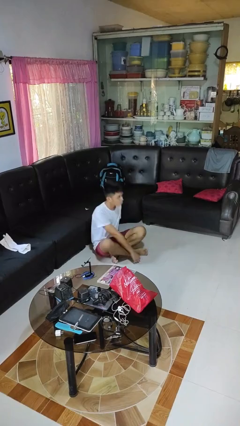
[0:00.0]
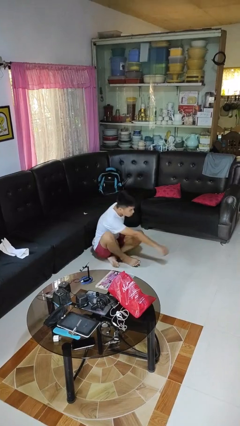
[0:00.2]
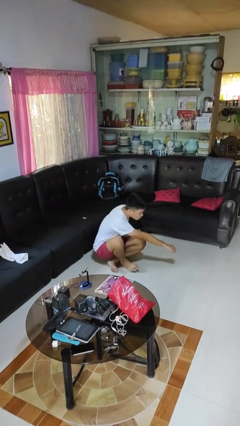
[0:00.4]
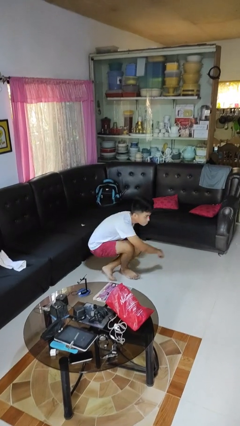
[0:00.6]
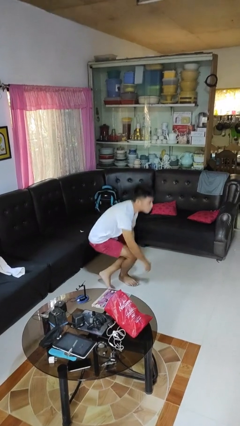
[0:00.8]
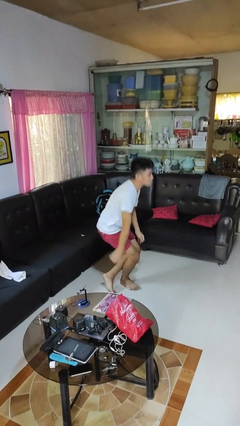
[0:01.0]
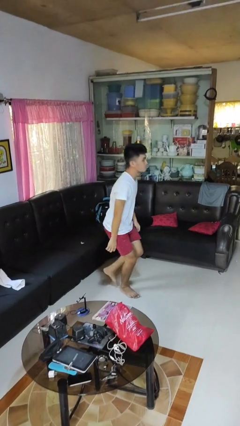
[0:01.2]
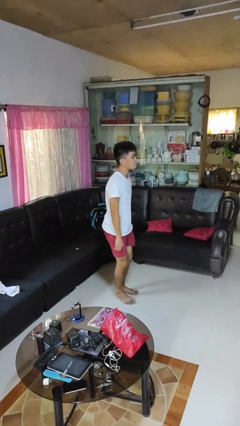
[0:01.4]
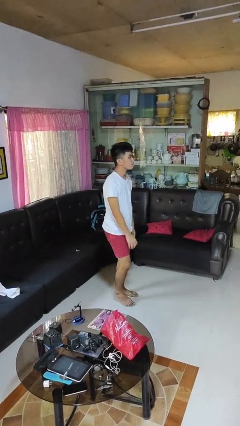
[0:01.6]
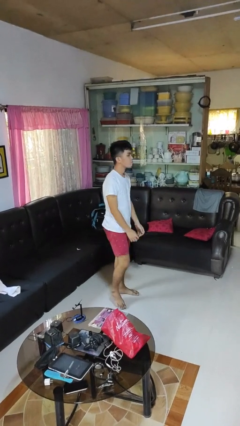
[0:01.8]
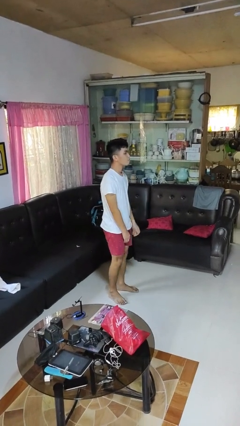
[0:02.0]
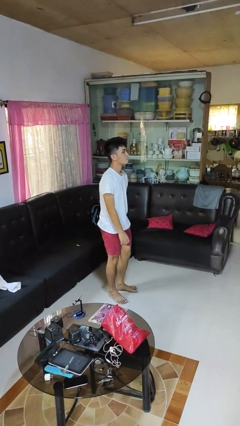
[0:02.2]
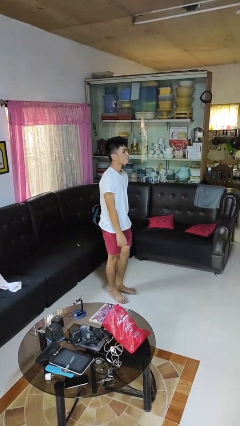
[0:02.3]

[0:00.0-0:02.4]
person stands up from floor

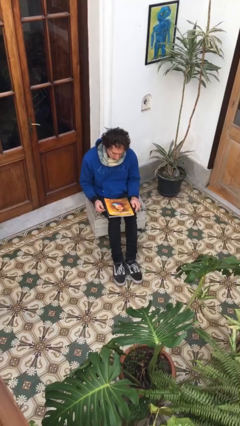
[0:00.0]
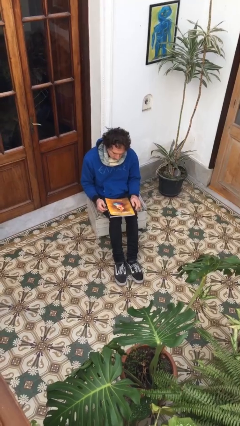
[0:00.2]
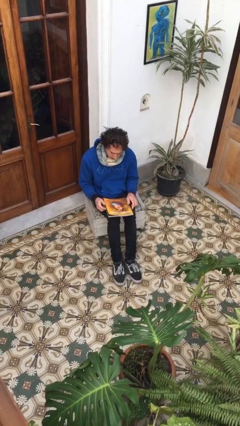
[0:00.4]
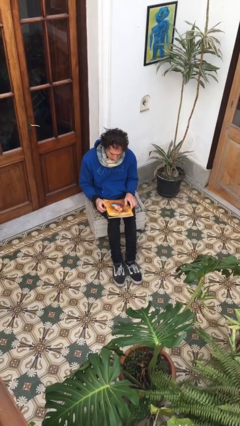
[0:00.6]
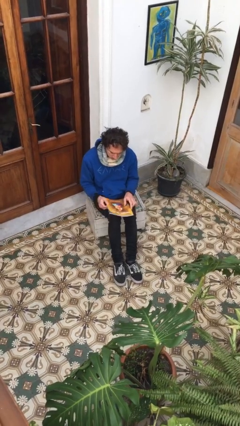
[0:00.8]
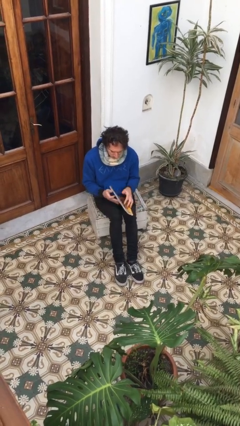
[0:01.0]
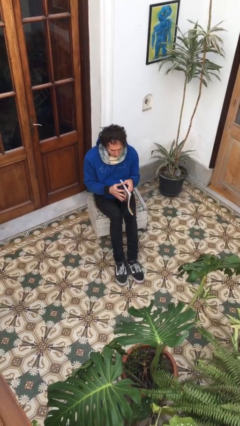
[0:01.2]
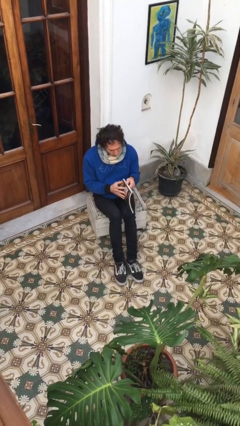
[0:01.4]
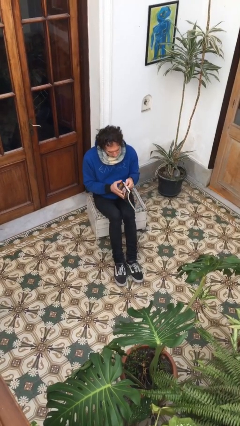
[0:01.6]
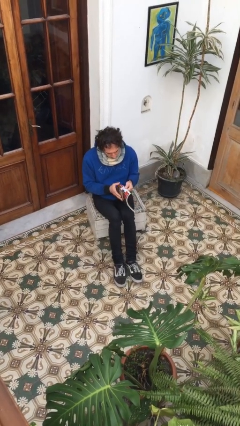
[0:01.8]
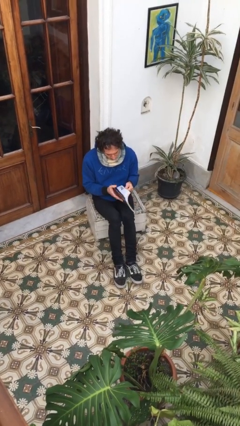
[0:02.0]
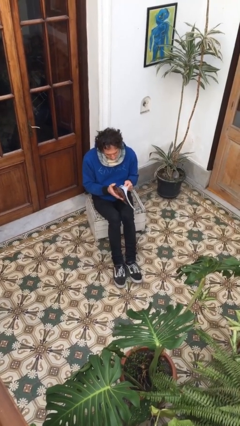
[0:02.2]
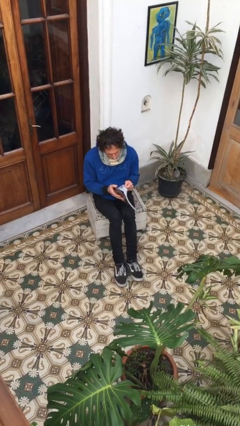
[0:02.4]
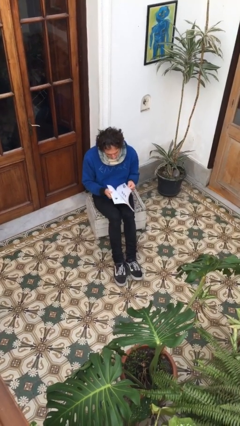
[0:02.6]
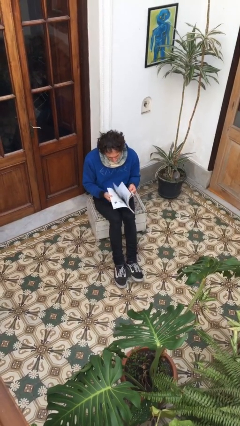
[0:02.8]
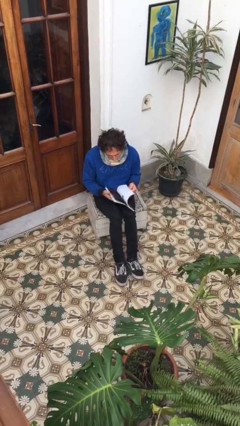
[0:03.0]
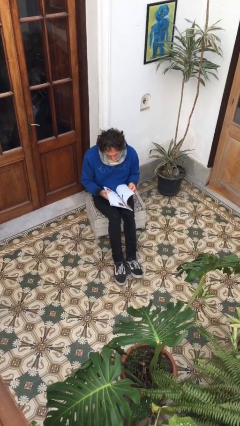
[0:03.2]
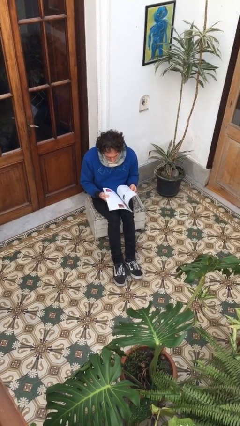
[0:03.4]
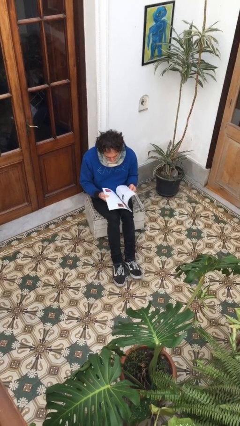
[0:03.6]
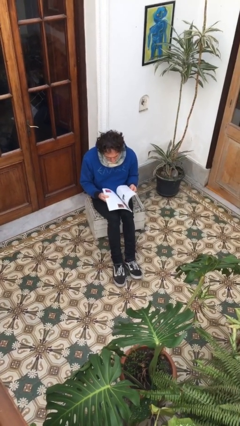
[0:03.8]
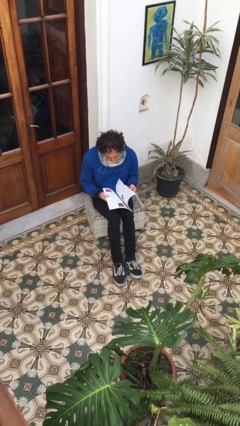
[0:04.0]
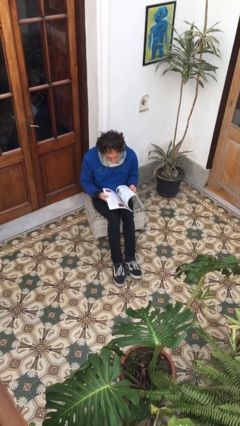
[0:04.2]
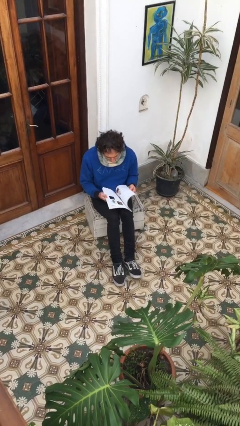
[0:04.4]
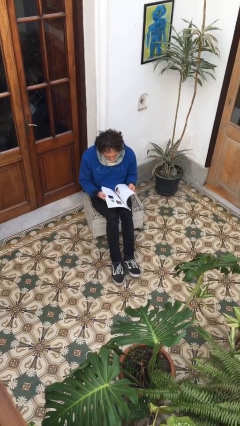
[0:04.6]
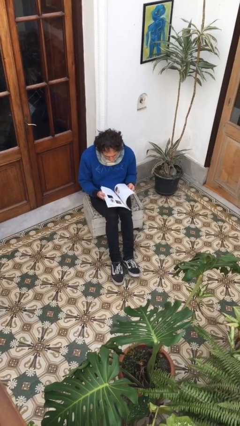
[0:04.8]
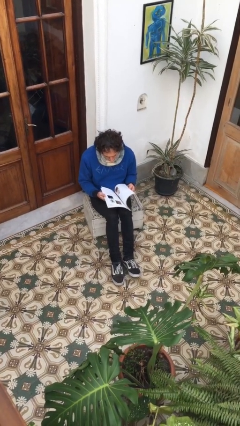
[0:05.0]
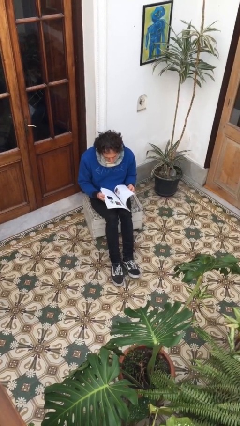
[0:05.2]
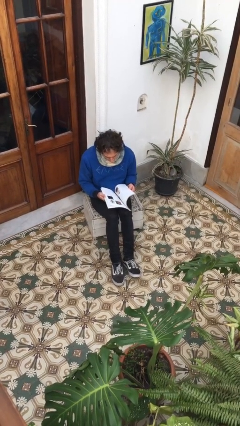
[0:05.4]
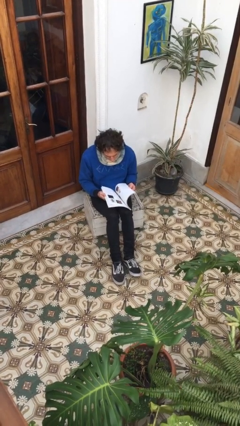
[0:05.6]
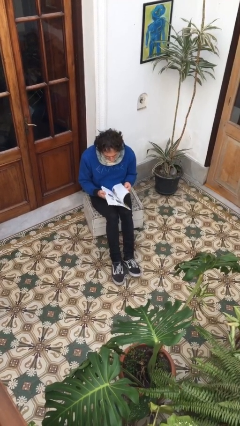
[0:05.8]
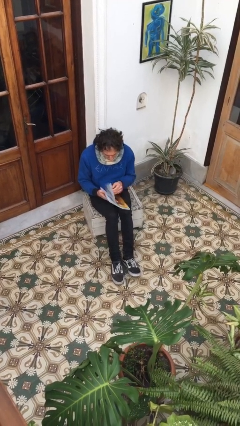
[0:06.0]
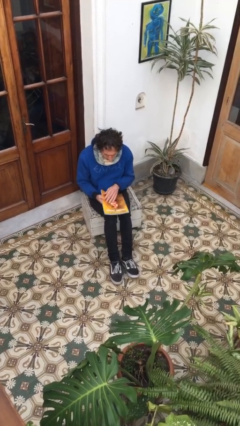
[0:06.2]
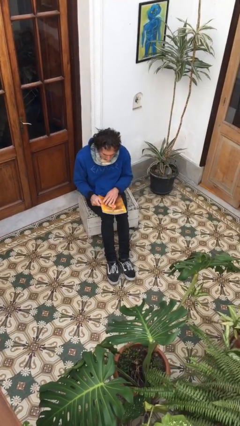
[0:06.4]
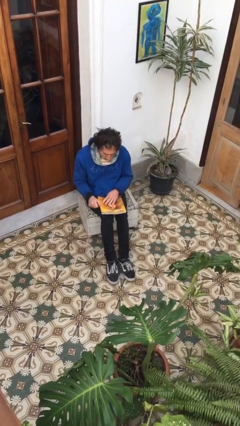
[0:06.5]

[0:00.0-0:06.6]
person reads magazine

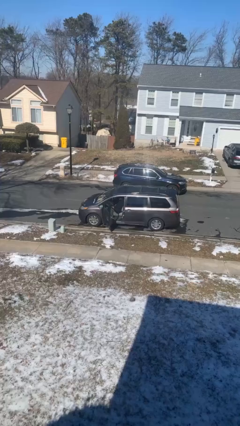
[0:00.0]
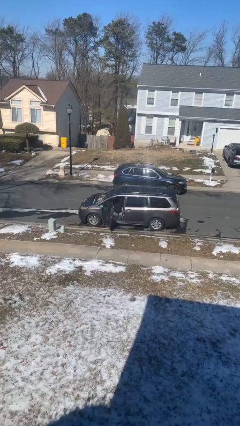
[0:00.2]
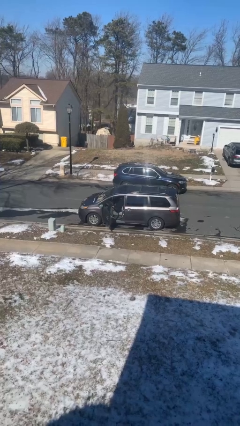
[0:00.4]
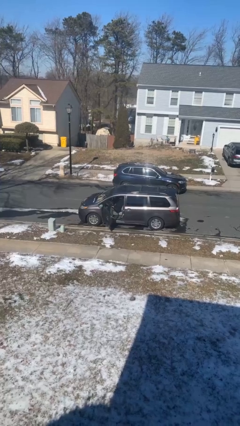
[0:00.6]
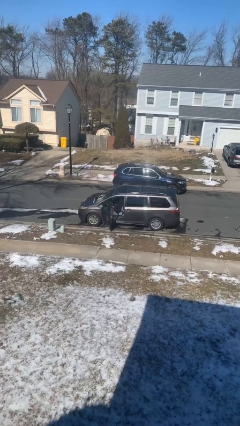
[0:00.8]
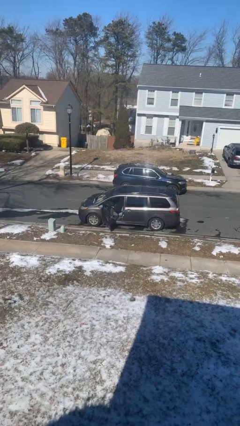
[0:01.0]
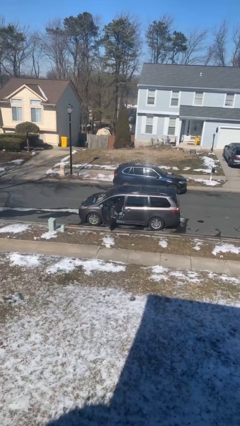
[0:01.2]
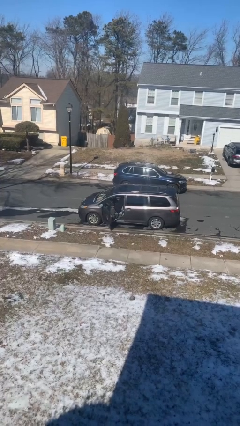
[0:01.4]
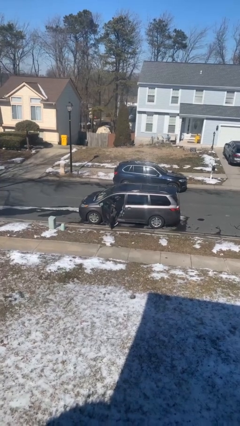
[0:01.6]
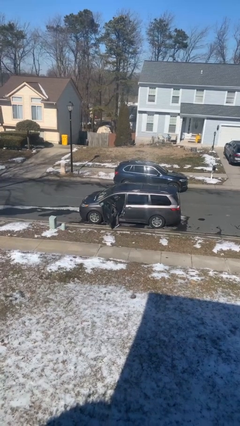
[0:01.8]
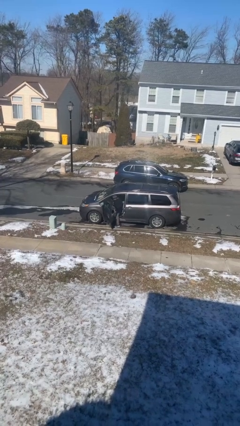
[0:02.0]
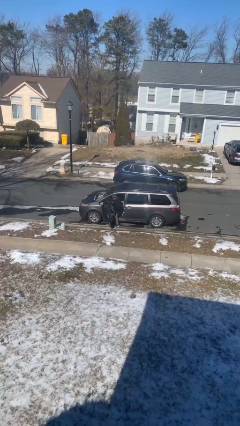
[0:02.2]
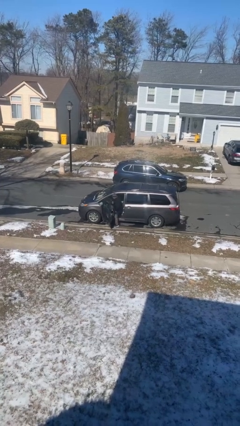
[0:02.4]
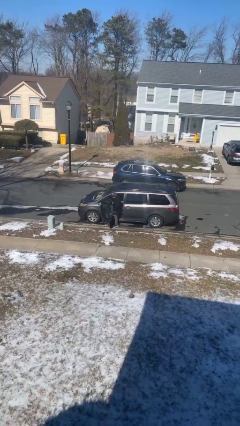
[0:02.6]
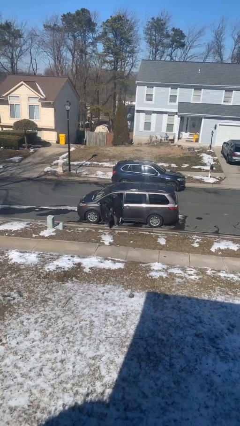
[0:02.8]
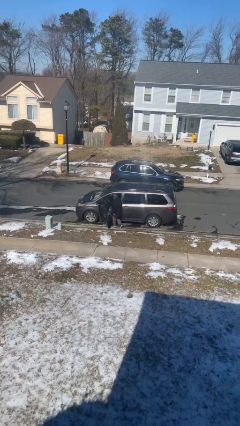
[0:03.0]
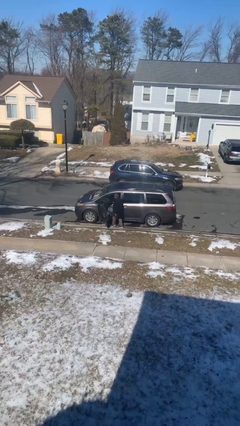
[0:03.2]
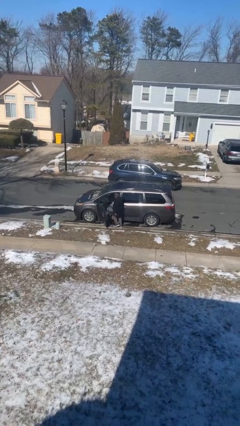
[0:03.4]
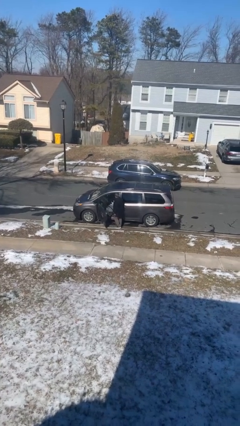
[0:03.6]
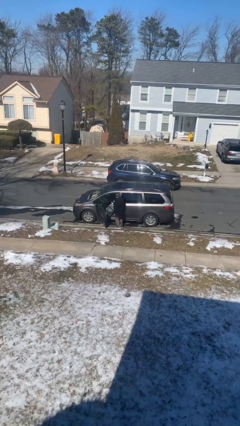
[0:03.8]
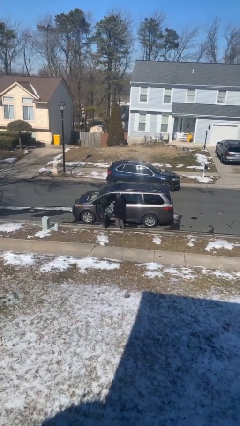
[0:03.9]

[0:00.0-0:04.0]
person exits car

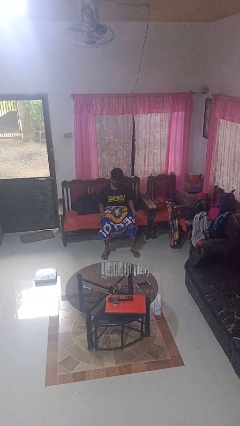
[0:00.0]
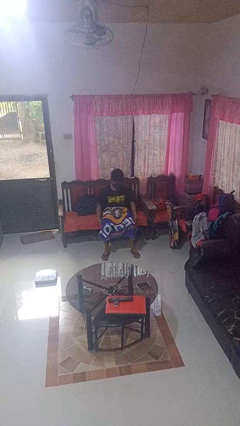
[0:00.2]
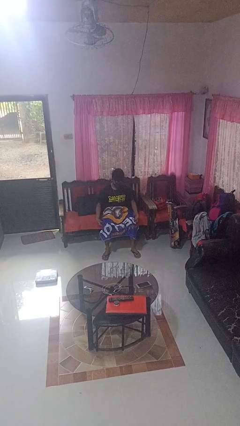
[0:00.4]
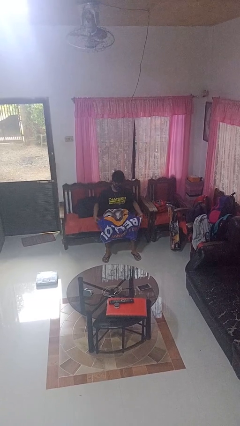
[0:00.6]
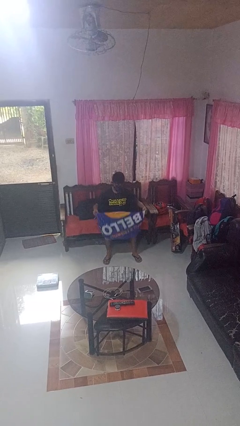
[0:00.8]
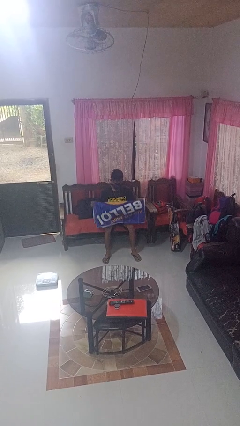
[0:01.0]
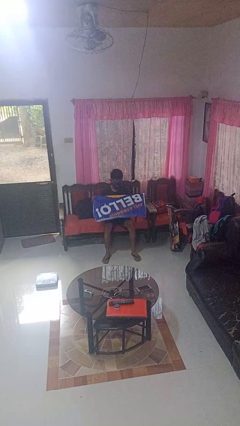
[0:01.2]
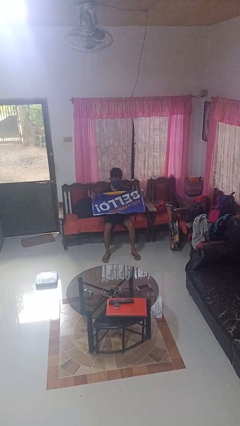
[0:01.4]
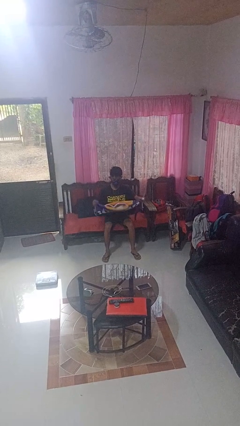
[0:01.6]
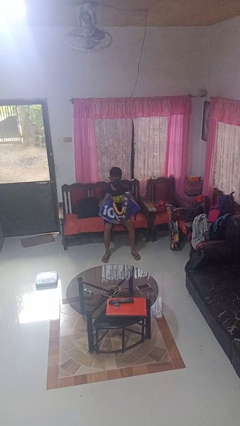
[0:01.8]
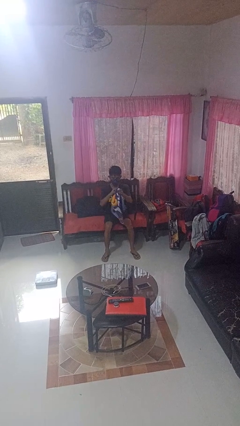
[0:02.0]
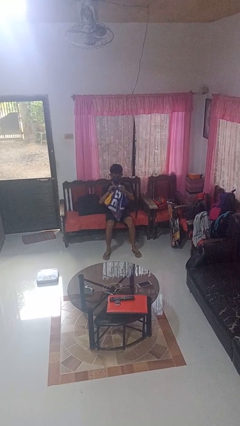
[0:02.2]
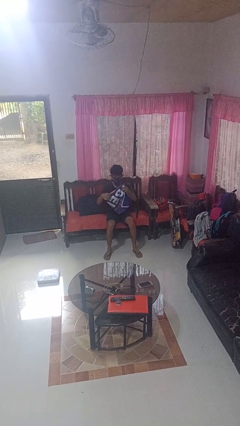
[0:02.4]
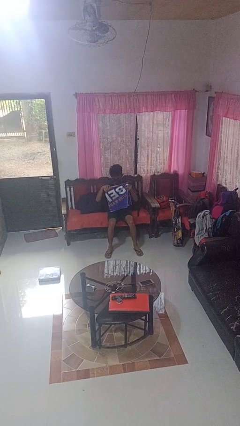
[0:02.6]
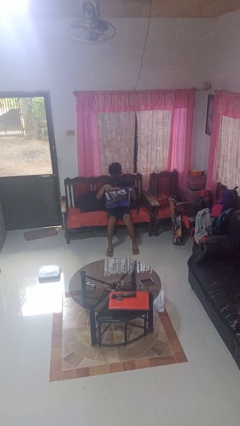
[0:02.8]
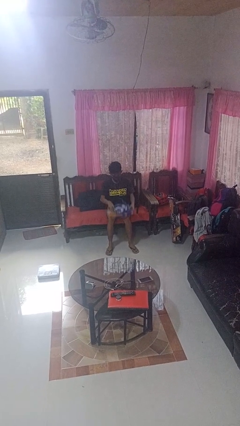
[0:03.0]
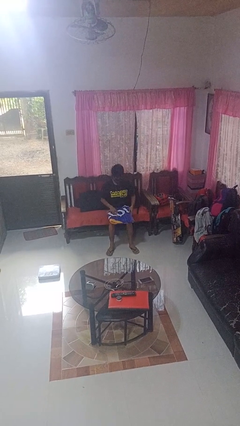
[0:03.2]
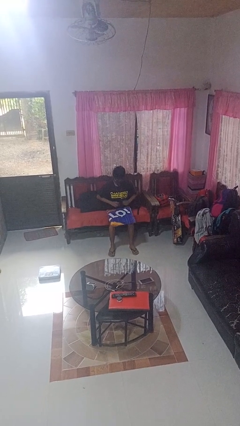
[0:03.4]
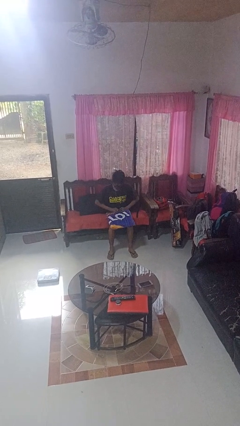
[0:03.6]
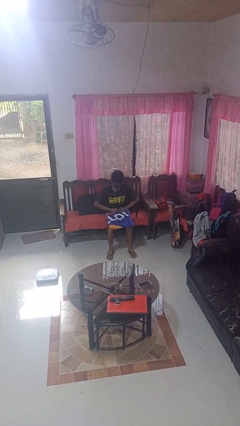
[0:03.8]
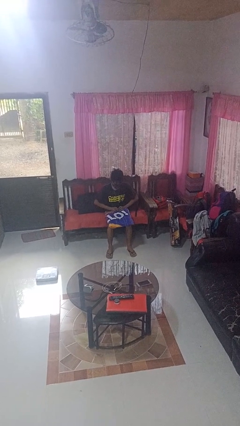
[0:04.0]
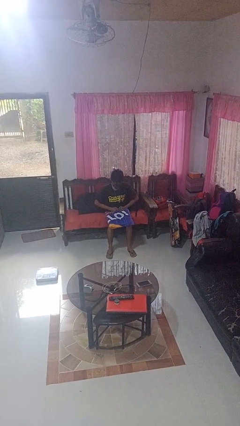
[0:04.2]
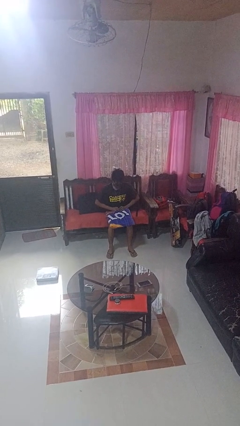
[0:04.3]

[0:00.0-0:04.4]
person folds towel
